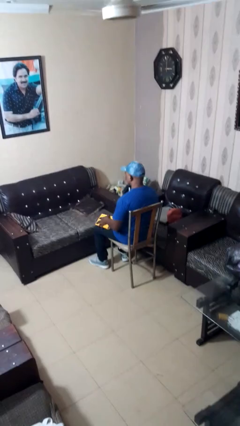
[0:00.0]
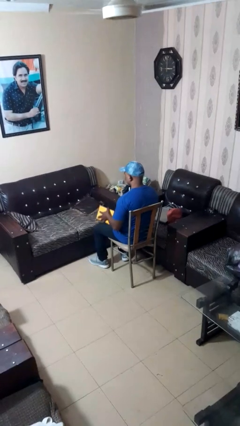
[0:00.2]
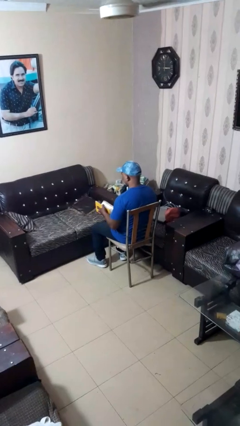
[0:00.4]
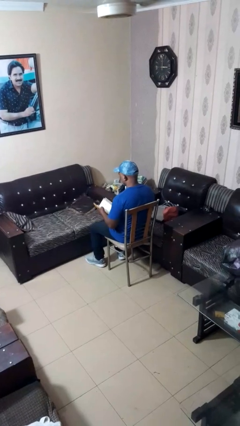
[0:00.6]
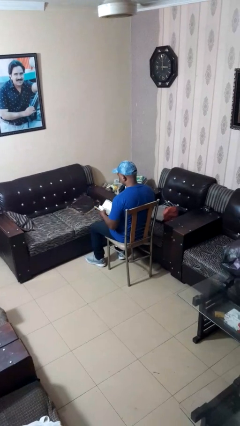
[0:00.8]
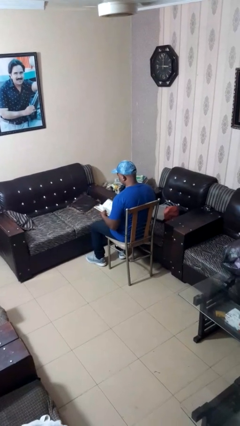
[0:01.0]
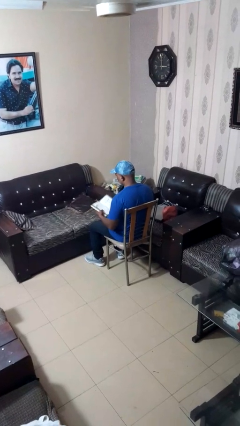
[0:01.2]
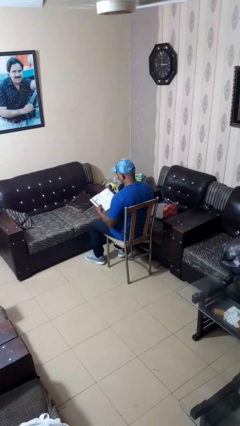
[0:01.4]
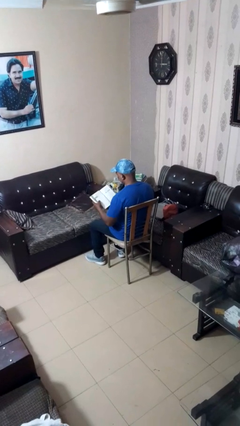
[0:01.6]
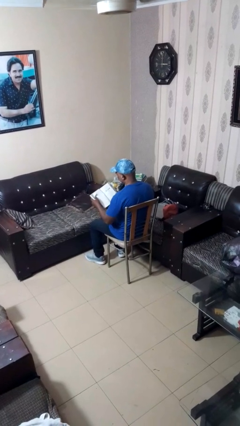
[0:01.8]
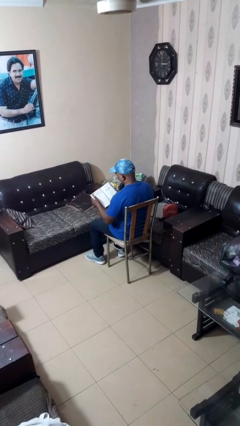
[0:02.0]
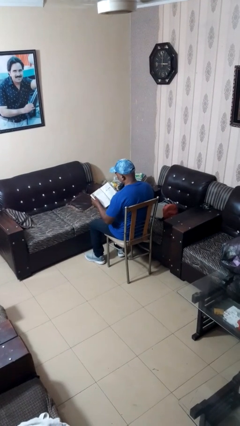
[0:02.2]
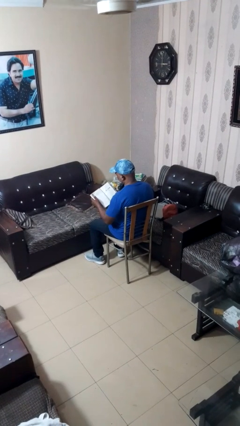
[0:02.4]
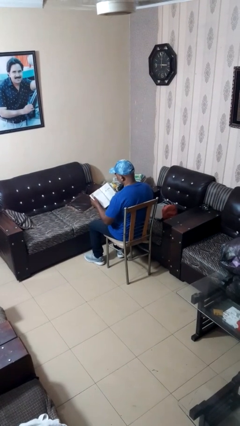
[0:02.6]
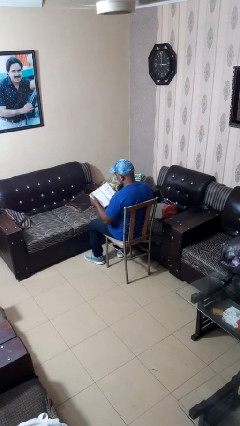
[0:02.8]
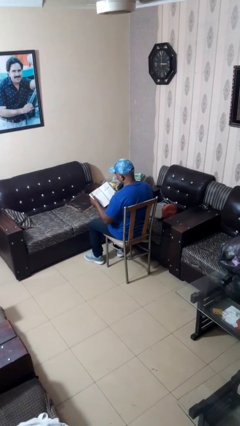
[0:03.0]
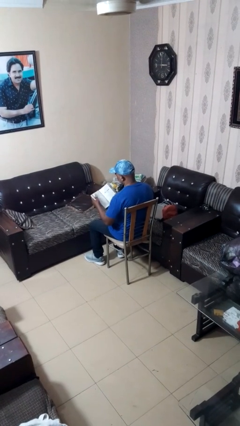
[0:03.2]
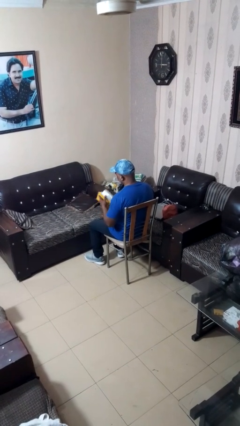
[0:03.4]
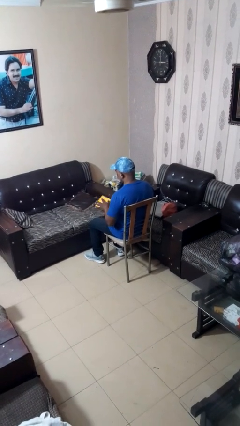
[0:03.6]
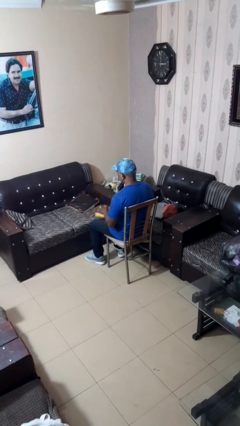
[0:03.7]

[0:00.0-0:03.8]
person reads book

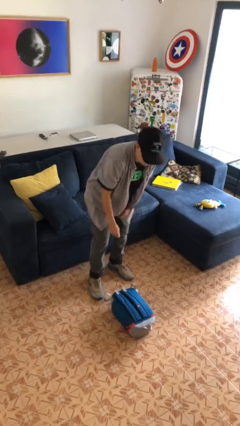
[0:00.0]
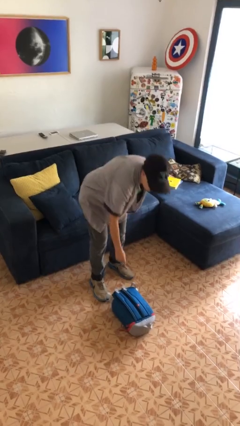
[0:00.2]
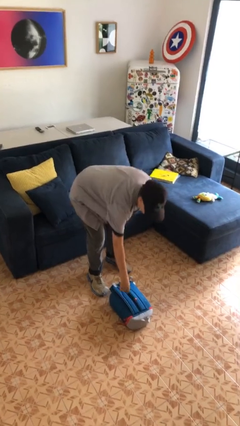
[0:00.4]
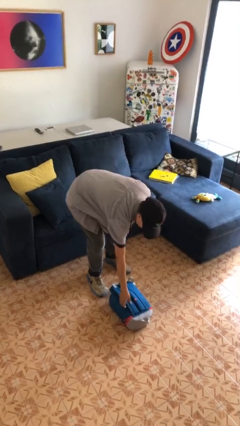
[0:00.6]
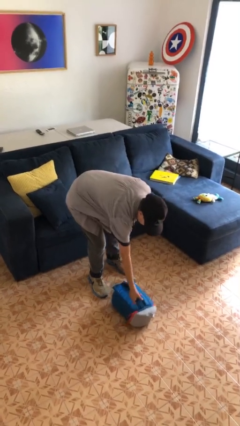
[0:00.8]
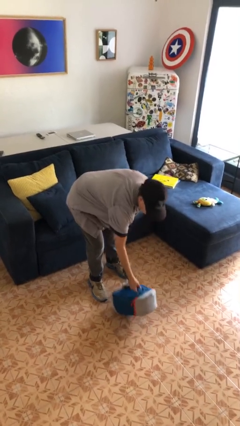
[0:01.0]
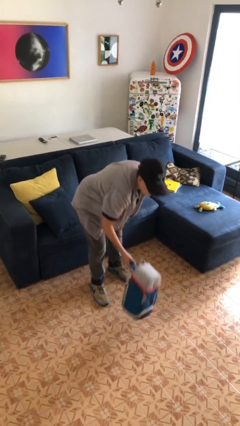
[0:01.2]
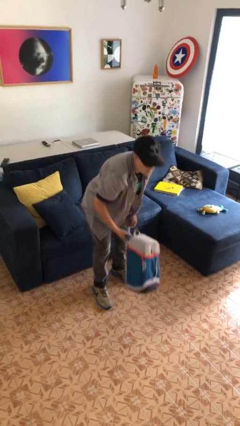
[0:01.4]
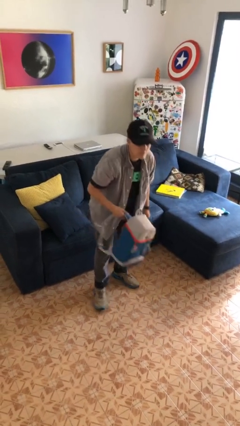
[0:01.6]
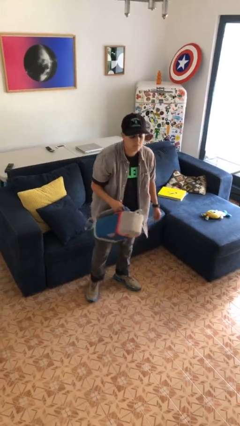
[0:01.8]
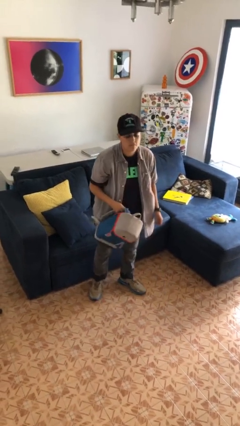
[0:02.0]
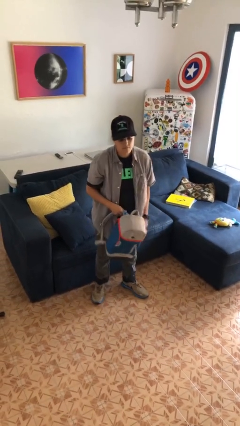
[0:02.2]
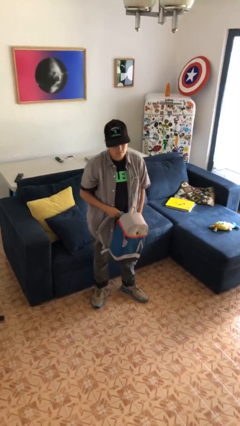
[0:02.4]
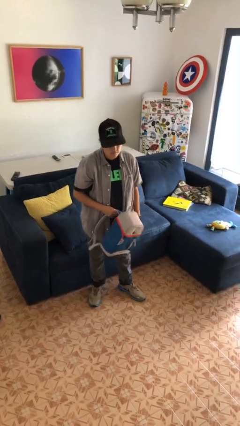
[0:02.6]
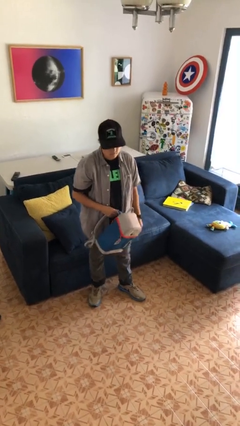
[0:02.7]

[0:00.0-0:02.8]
person picks up object from floor

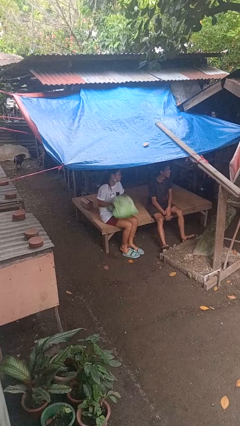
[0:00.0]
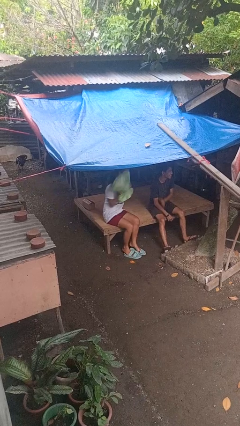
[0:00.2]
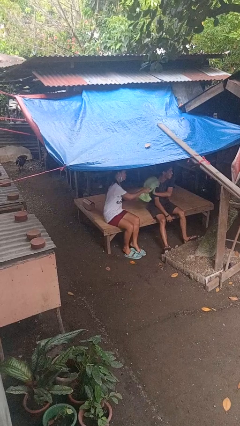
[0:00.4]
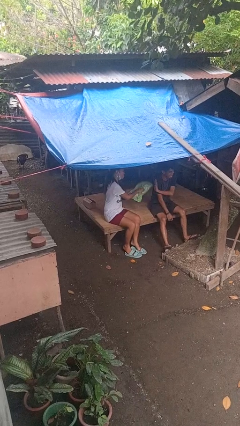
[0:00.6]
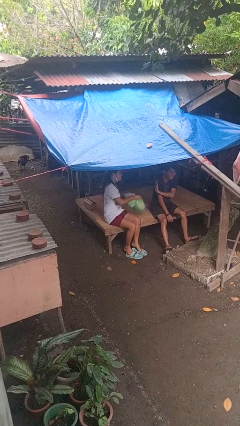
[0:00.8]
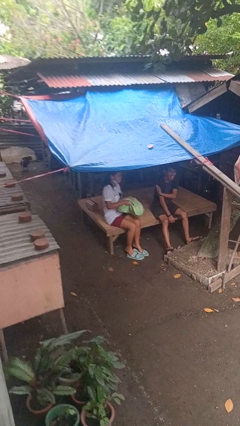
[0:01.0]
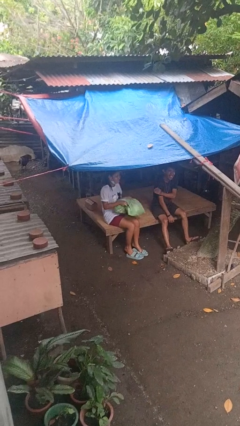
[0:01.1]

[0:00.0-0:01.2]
person hits person with pillow

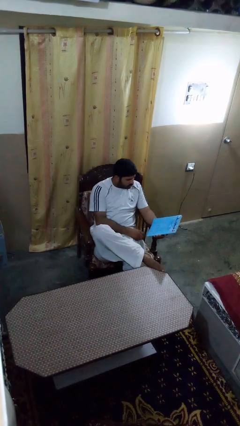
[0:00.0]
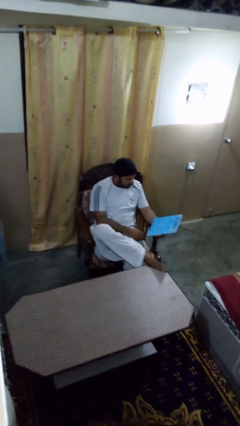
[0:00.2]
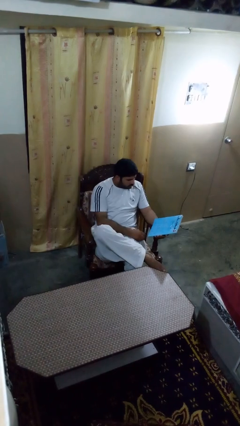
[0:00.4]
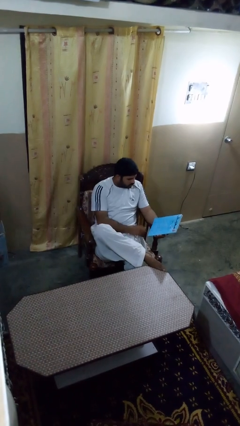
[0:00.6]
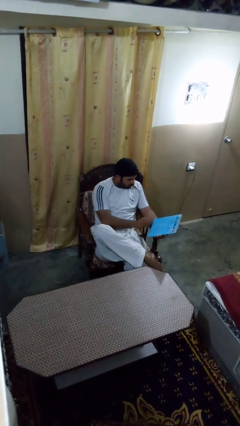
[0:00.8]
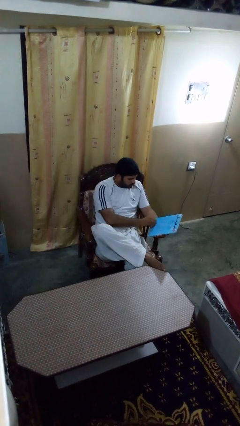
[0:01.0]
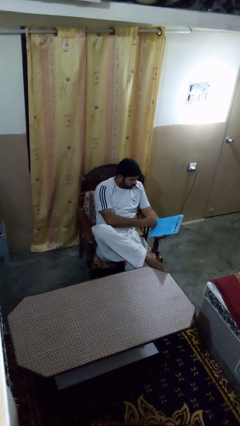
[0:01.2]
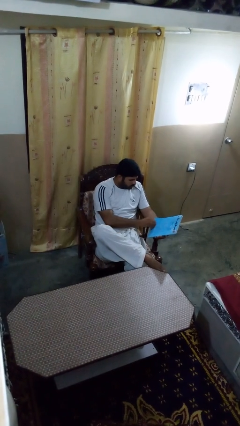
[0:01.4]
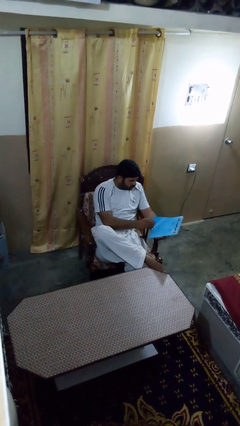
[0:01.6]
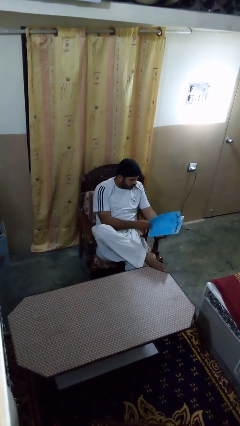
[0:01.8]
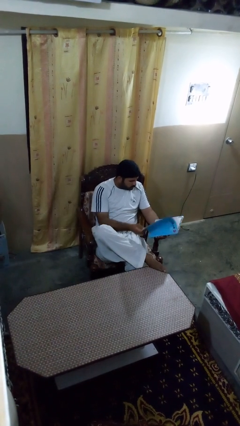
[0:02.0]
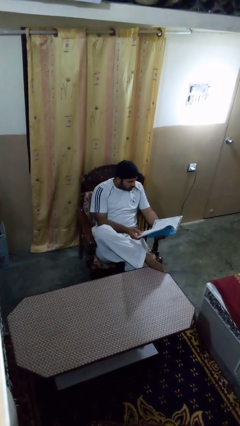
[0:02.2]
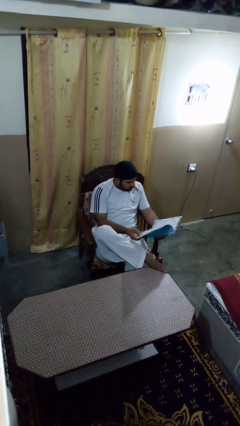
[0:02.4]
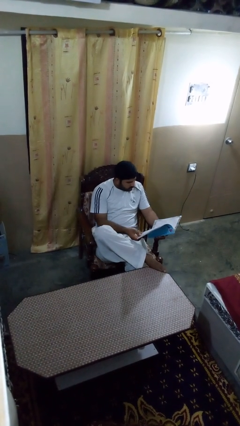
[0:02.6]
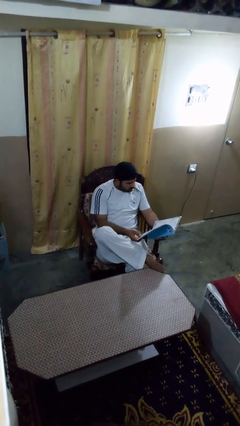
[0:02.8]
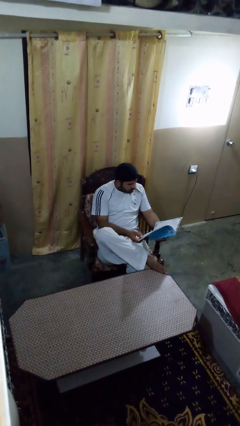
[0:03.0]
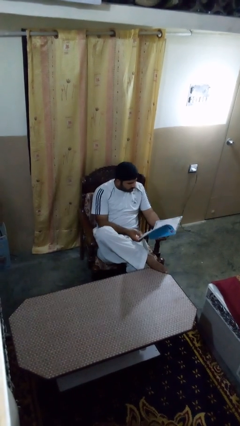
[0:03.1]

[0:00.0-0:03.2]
person reads magazine

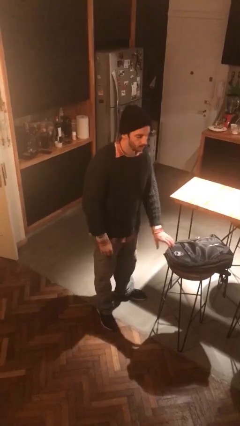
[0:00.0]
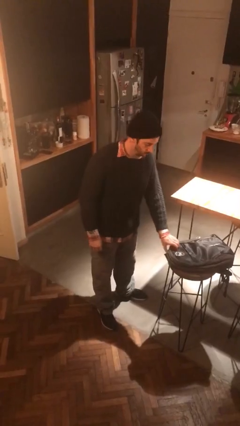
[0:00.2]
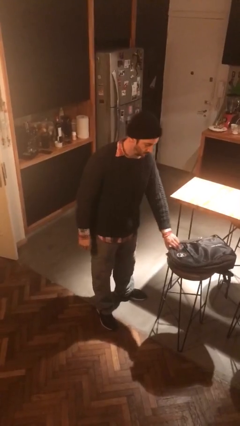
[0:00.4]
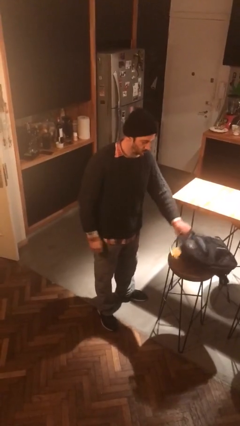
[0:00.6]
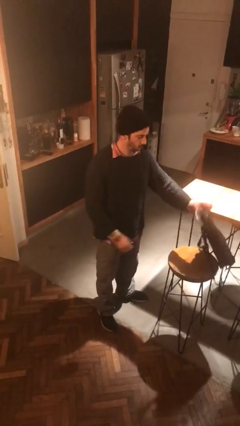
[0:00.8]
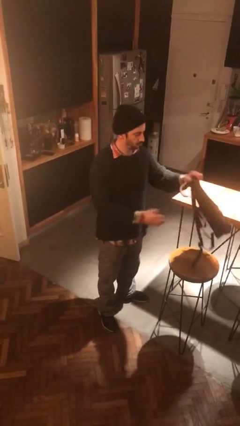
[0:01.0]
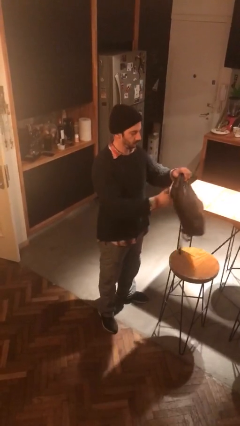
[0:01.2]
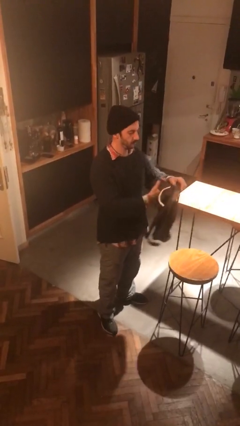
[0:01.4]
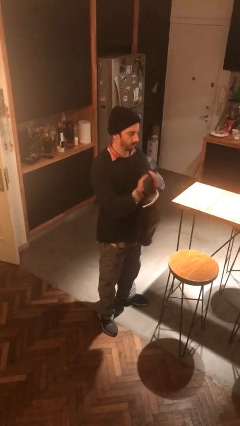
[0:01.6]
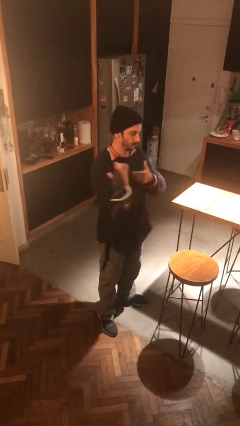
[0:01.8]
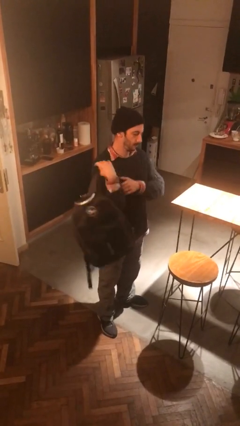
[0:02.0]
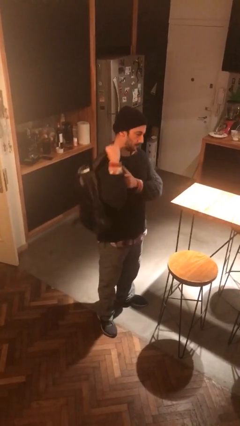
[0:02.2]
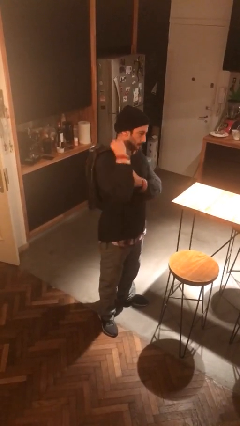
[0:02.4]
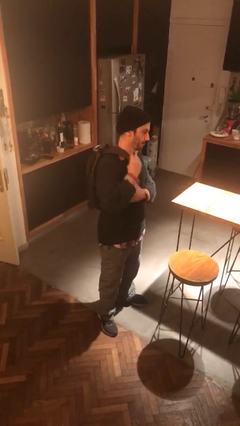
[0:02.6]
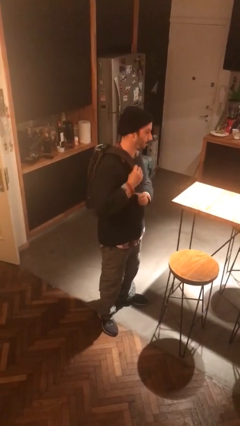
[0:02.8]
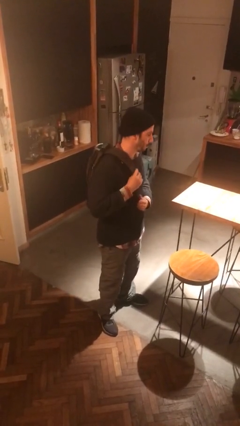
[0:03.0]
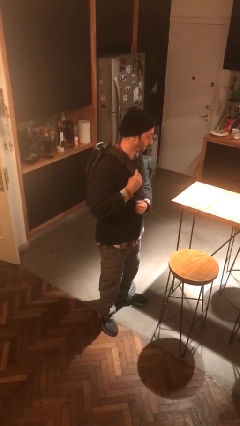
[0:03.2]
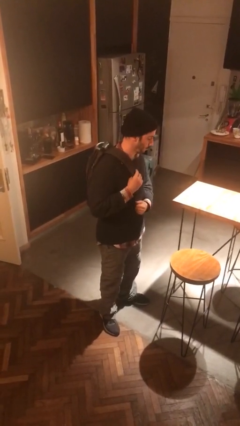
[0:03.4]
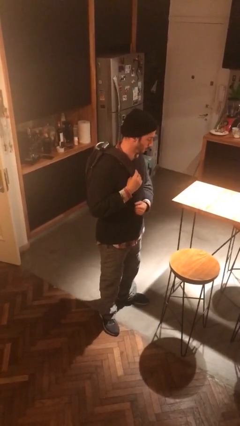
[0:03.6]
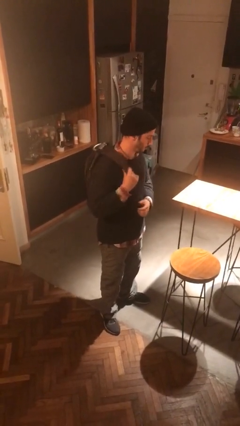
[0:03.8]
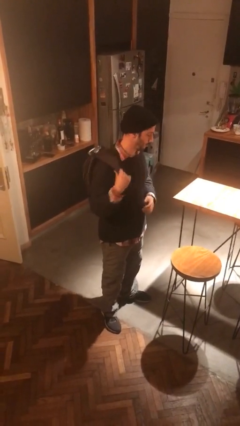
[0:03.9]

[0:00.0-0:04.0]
person puts on backpack

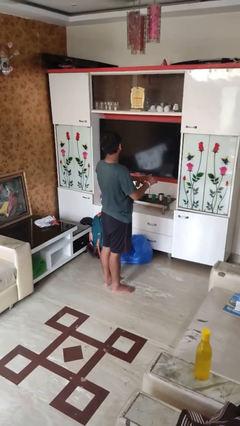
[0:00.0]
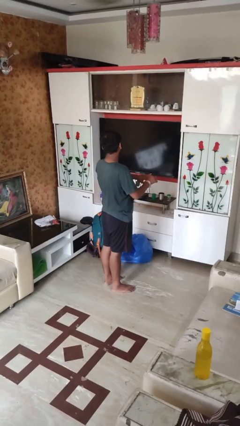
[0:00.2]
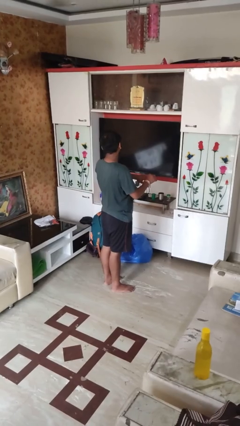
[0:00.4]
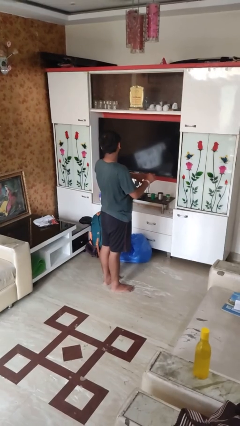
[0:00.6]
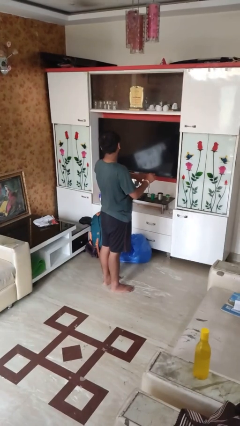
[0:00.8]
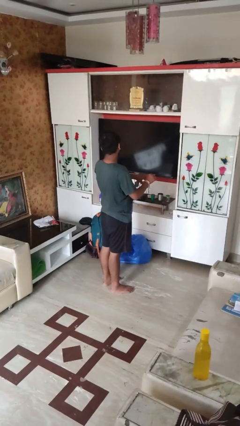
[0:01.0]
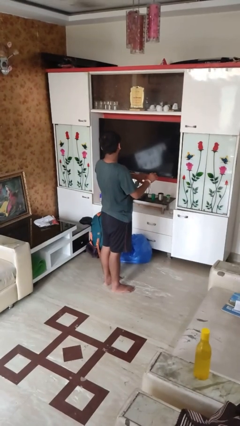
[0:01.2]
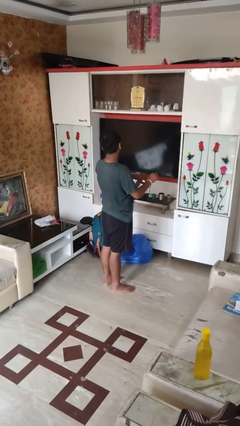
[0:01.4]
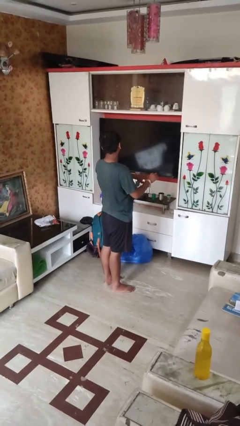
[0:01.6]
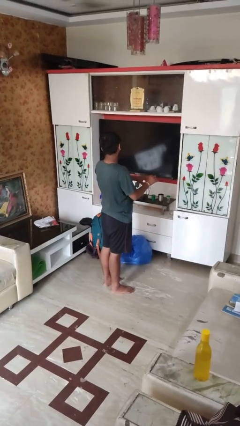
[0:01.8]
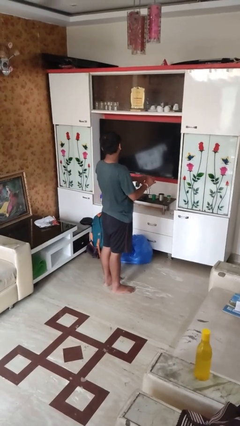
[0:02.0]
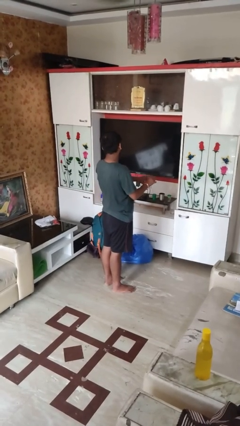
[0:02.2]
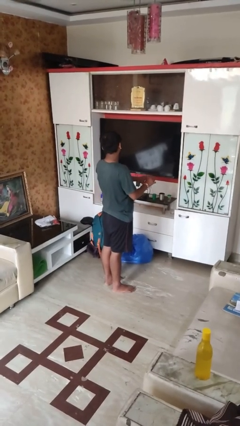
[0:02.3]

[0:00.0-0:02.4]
person files fingernails

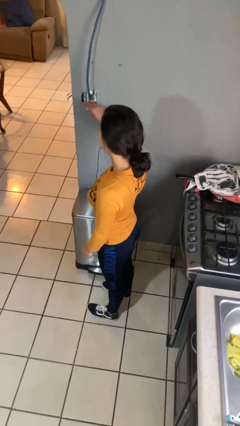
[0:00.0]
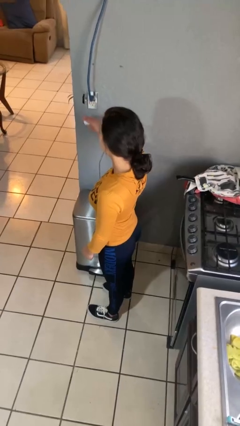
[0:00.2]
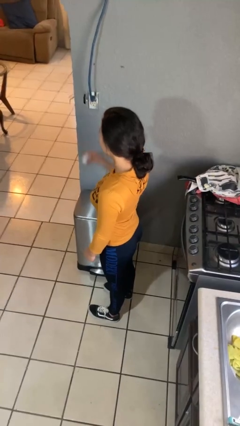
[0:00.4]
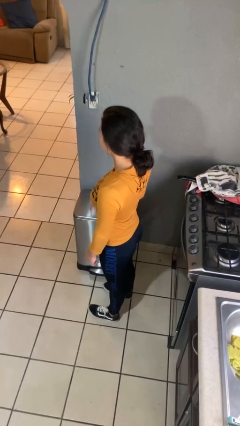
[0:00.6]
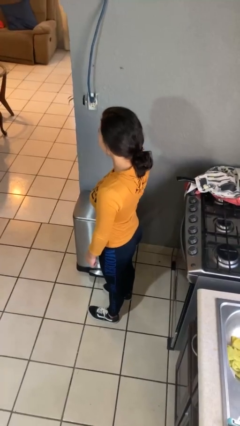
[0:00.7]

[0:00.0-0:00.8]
person unplugs from electrical socket
